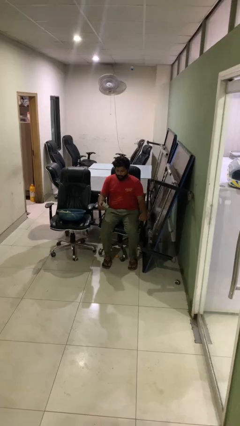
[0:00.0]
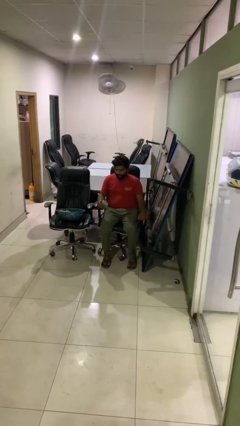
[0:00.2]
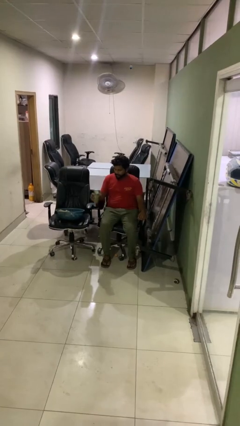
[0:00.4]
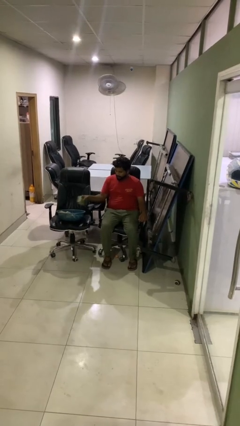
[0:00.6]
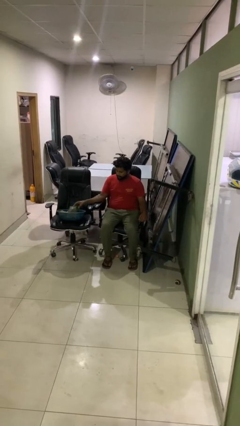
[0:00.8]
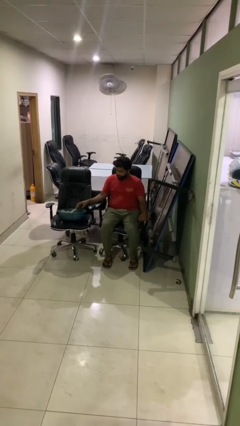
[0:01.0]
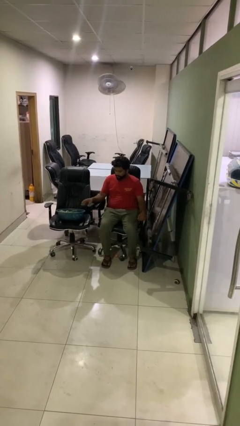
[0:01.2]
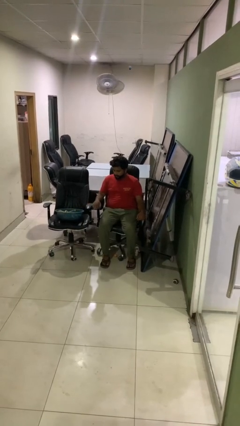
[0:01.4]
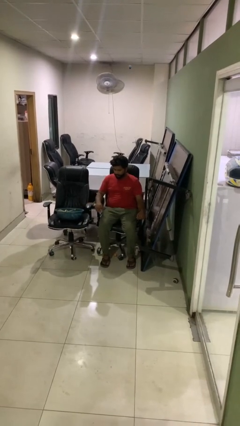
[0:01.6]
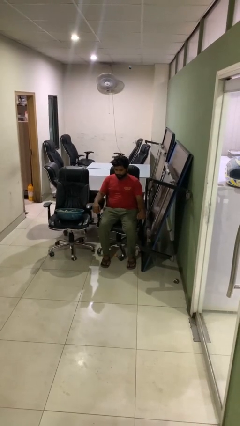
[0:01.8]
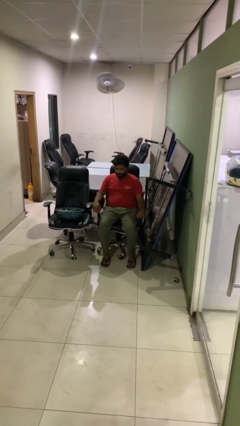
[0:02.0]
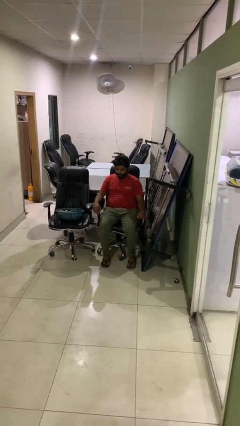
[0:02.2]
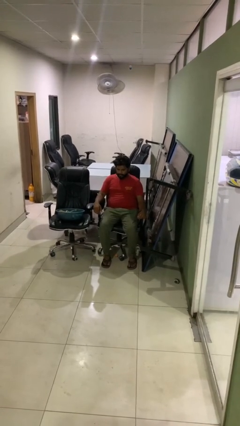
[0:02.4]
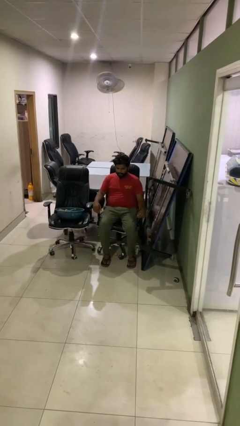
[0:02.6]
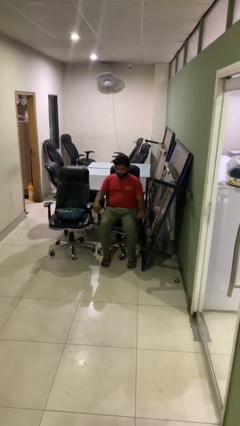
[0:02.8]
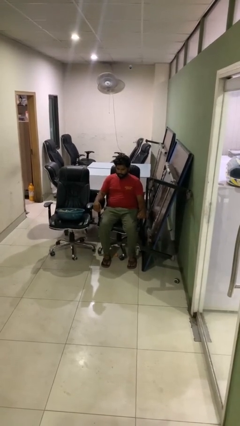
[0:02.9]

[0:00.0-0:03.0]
person puts object into basket

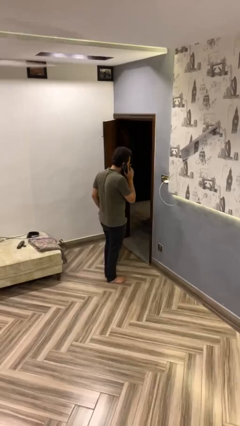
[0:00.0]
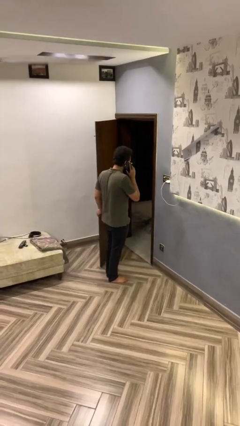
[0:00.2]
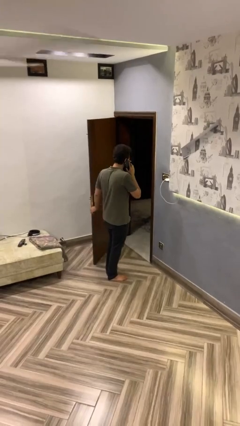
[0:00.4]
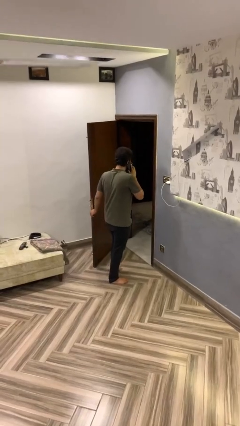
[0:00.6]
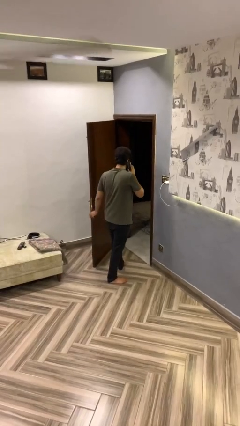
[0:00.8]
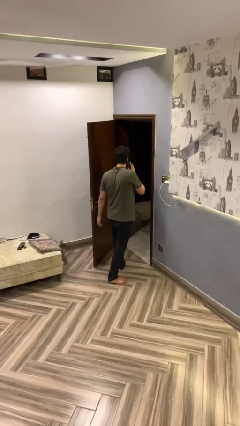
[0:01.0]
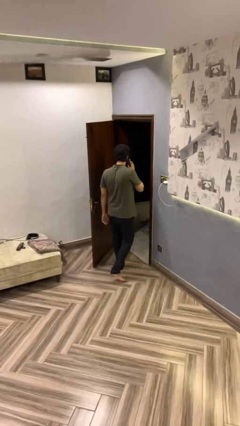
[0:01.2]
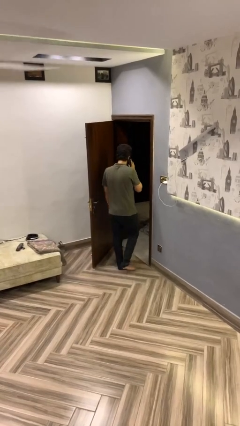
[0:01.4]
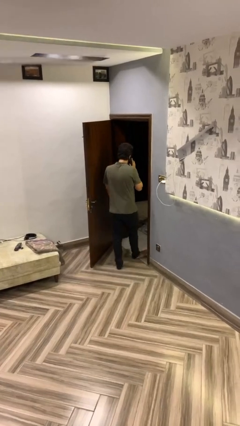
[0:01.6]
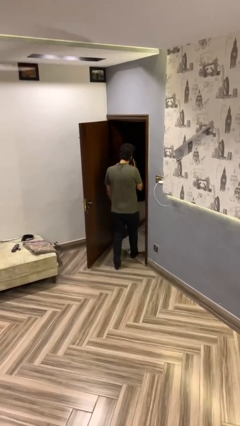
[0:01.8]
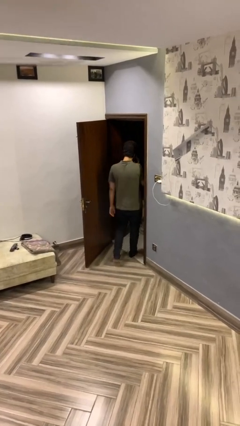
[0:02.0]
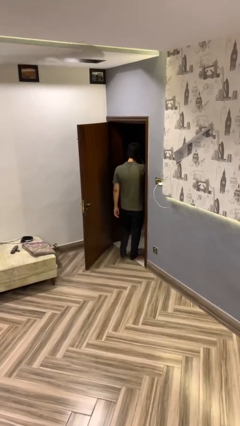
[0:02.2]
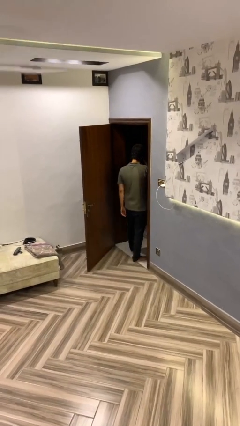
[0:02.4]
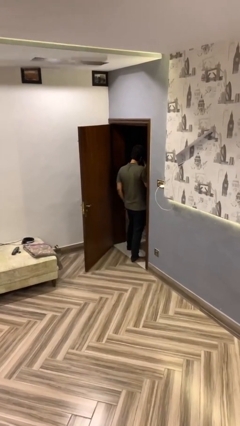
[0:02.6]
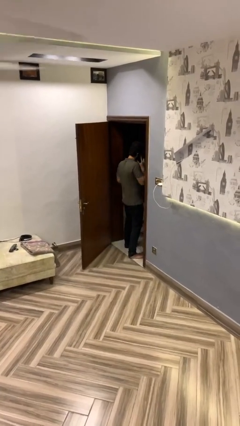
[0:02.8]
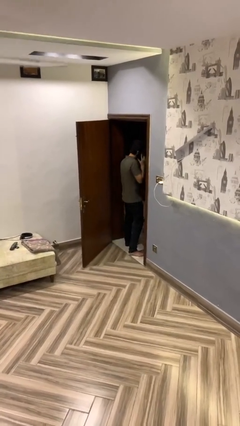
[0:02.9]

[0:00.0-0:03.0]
person exits scene through structure

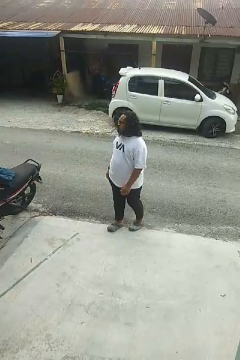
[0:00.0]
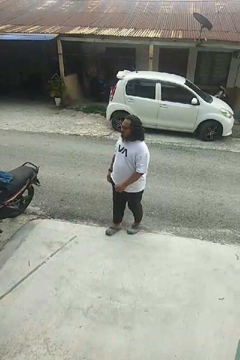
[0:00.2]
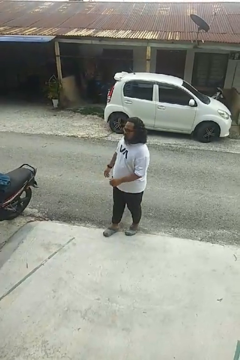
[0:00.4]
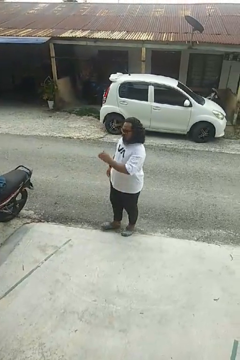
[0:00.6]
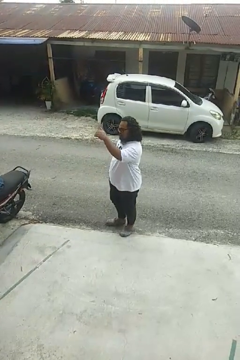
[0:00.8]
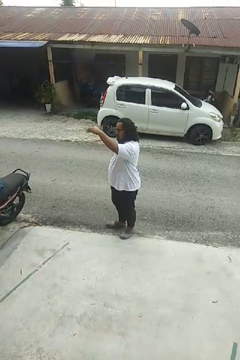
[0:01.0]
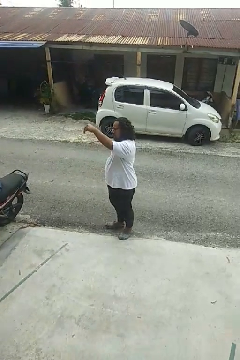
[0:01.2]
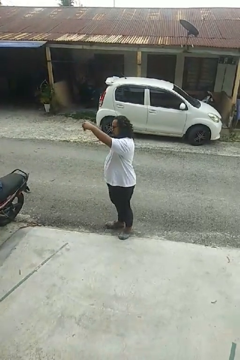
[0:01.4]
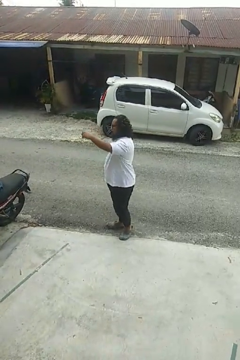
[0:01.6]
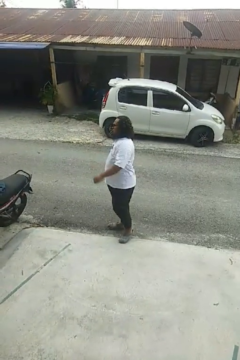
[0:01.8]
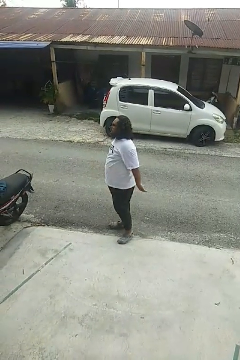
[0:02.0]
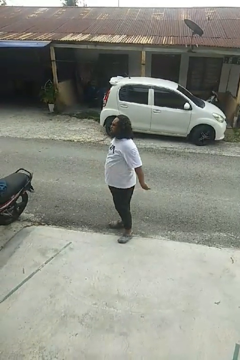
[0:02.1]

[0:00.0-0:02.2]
person gestures come here

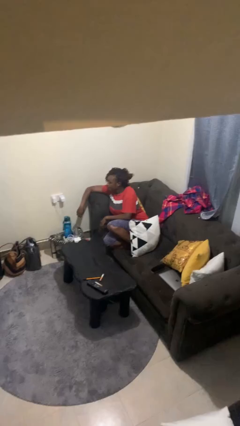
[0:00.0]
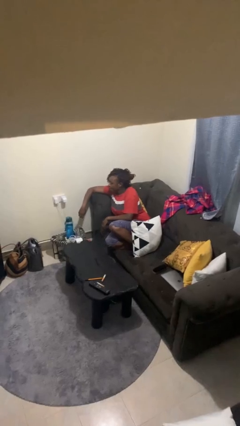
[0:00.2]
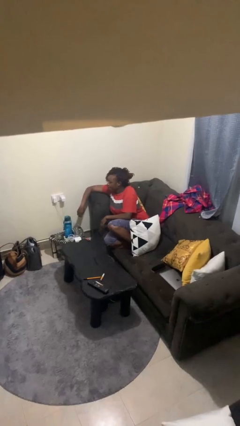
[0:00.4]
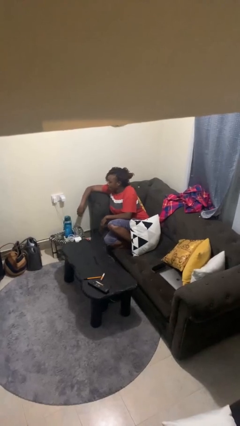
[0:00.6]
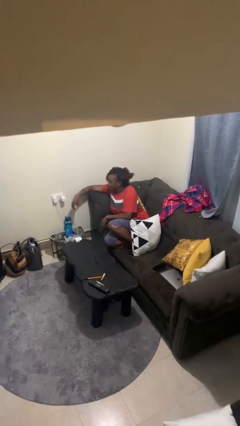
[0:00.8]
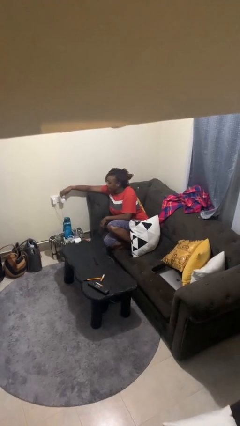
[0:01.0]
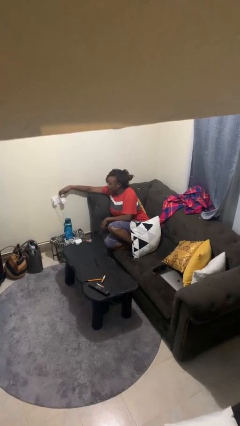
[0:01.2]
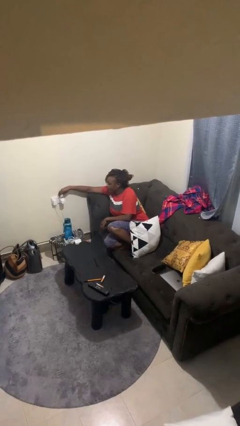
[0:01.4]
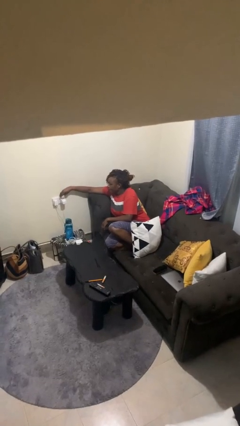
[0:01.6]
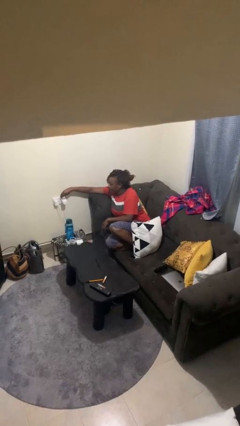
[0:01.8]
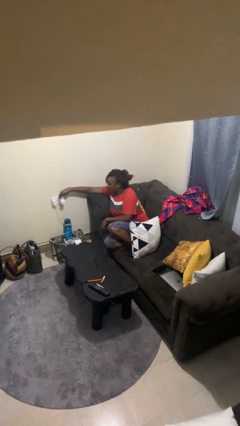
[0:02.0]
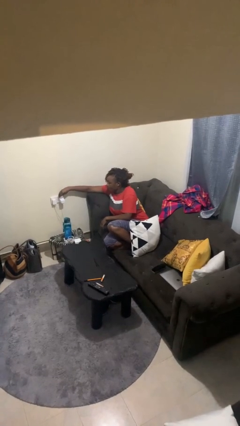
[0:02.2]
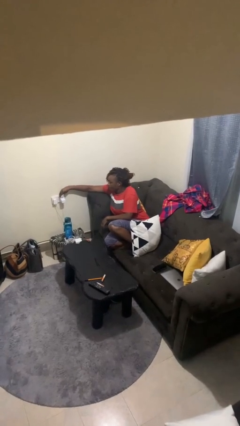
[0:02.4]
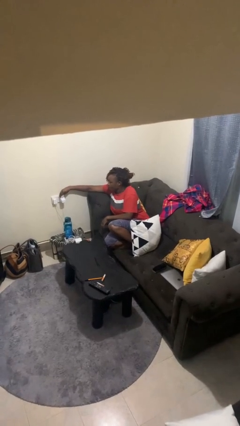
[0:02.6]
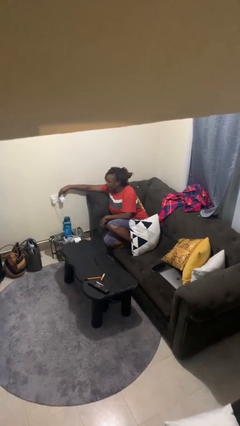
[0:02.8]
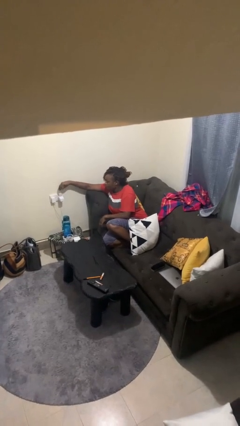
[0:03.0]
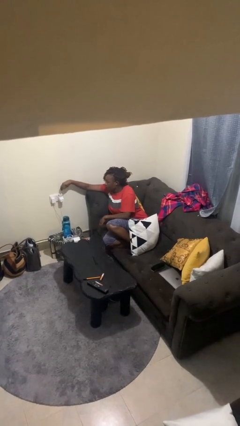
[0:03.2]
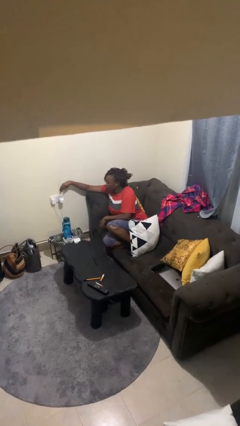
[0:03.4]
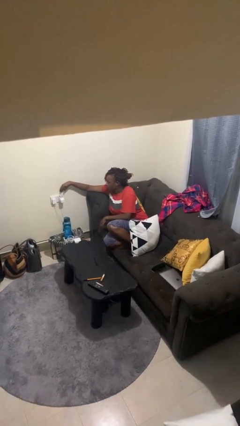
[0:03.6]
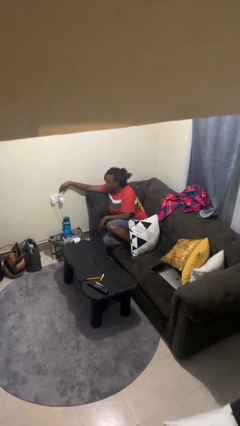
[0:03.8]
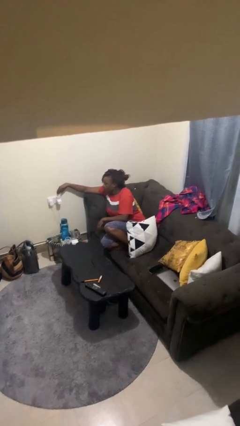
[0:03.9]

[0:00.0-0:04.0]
person plugs into electrical socket

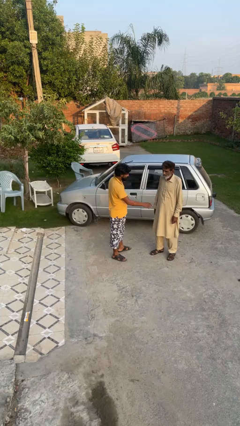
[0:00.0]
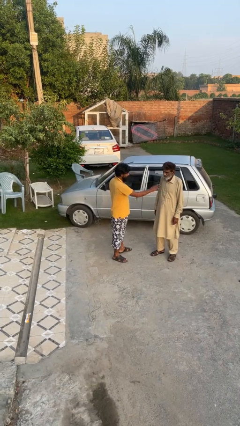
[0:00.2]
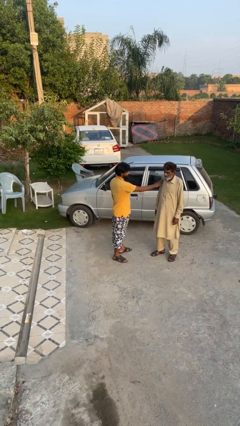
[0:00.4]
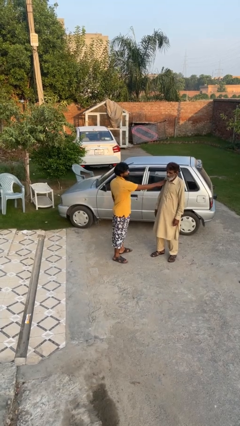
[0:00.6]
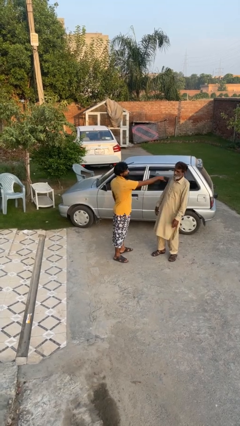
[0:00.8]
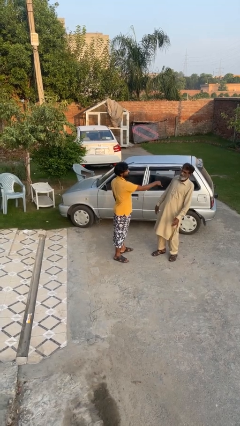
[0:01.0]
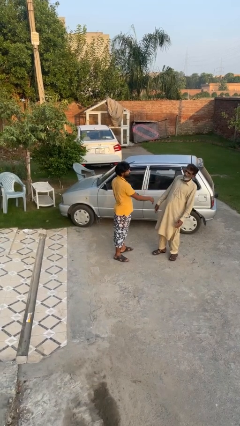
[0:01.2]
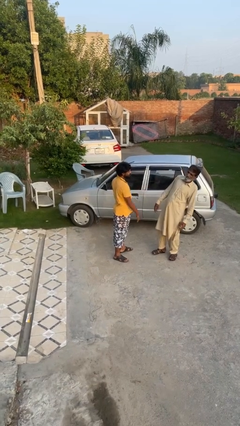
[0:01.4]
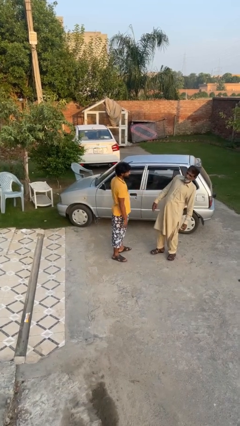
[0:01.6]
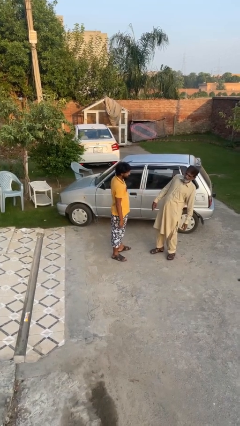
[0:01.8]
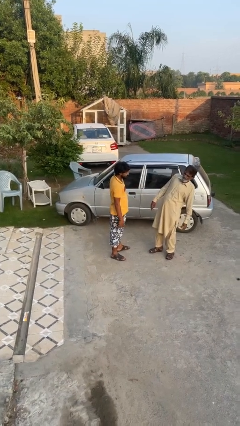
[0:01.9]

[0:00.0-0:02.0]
person shoves person

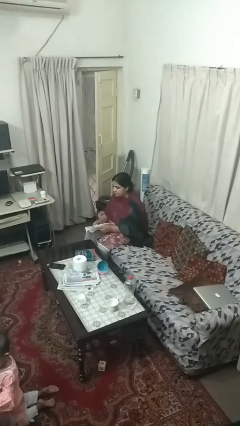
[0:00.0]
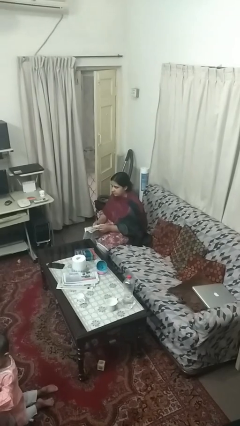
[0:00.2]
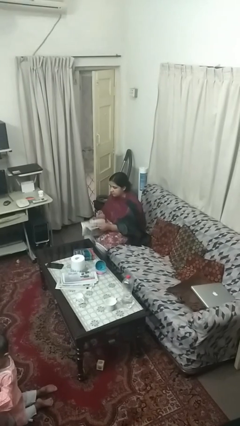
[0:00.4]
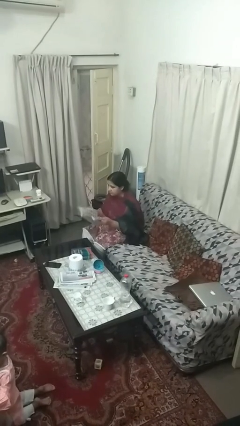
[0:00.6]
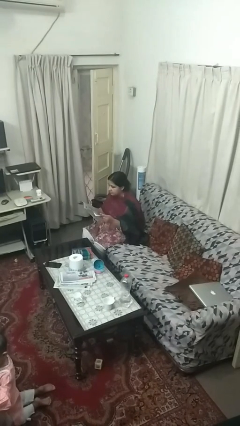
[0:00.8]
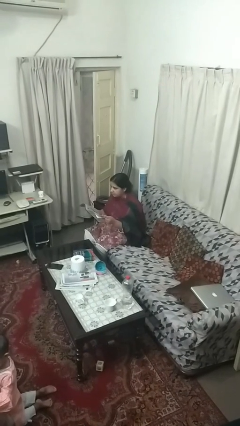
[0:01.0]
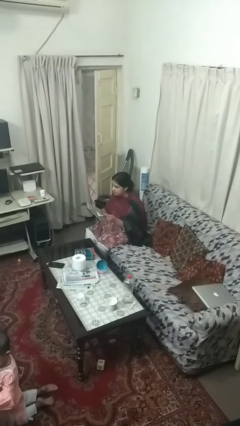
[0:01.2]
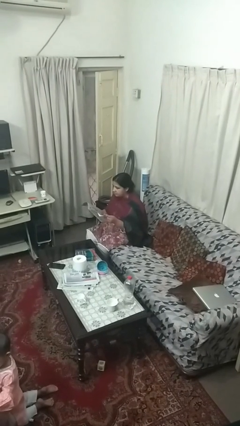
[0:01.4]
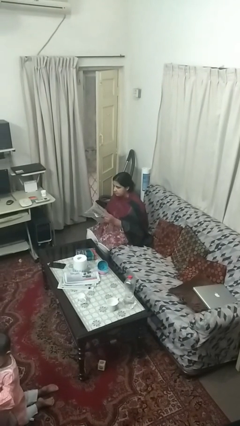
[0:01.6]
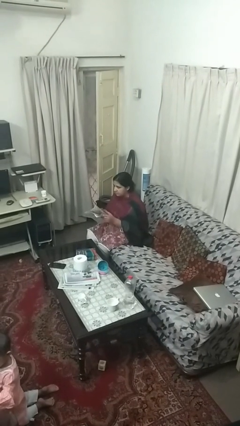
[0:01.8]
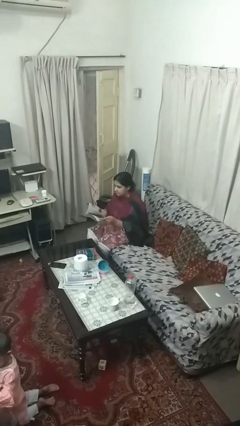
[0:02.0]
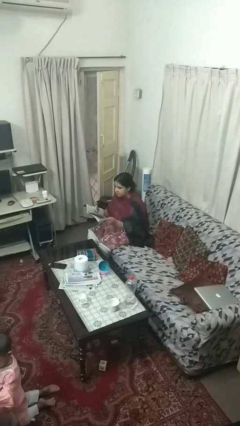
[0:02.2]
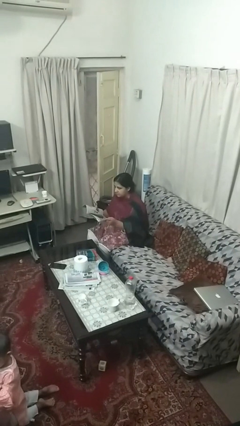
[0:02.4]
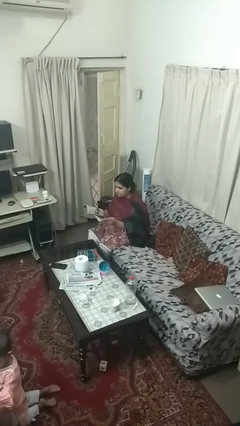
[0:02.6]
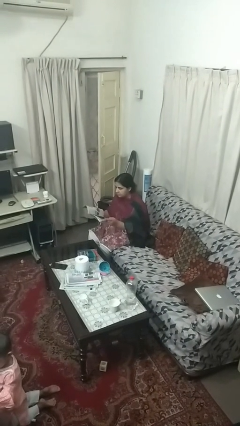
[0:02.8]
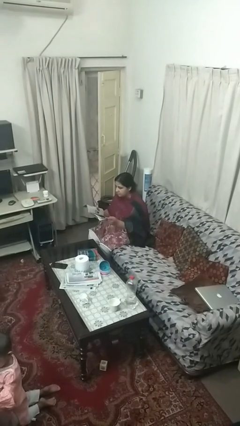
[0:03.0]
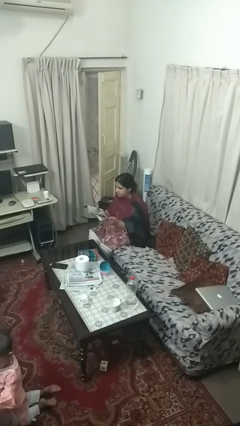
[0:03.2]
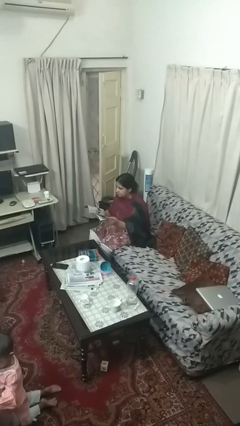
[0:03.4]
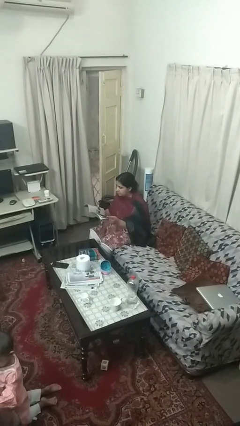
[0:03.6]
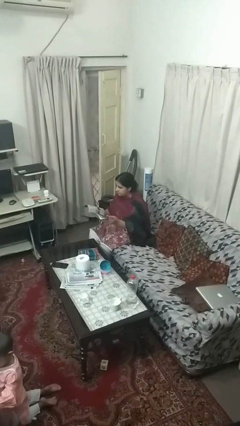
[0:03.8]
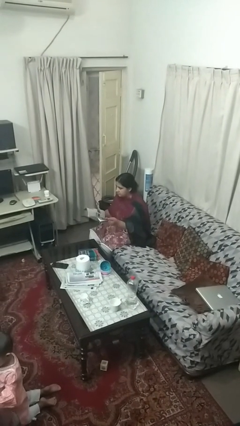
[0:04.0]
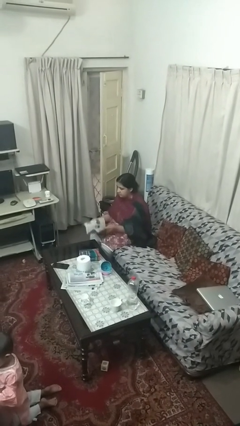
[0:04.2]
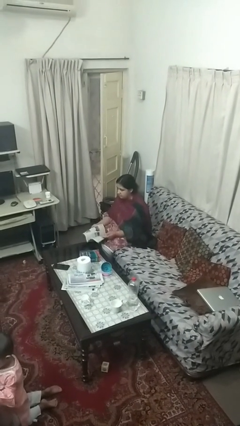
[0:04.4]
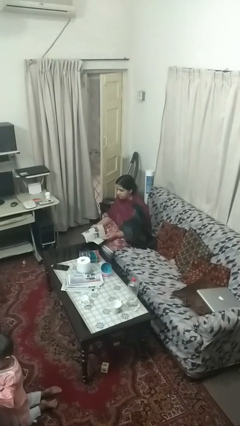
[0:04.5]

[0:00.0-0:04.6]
person reads magazine
